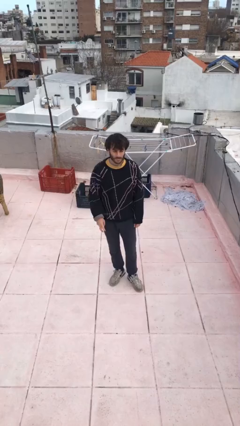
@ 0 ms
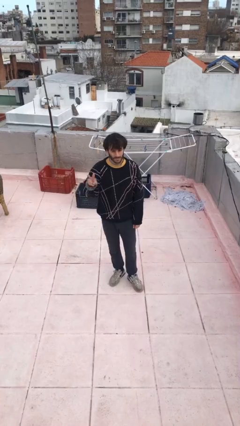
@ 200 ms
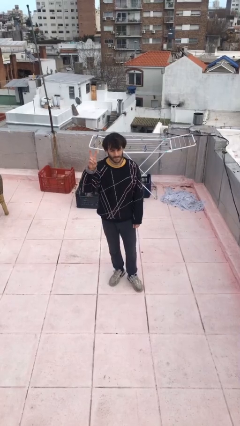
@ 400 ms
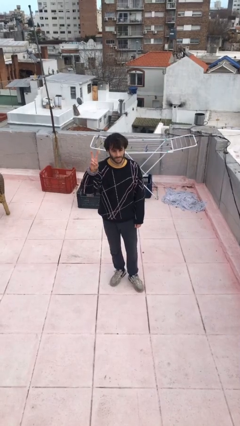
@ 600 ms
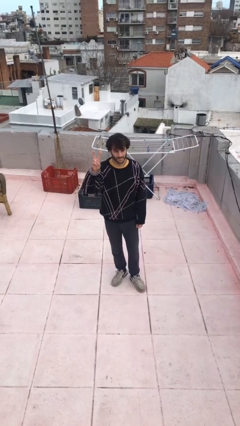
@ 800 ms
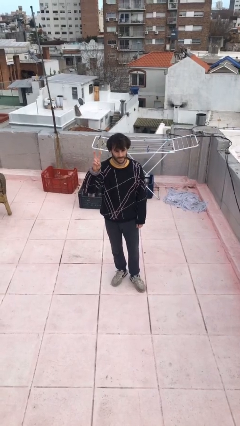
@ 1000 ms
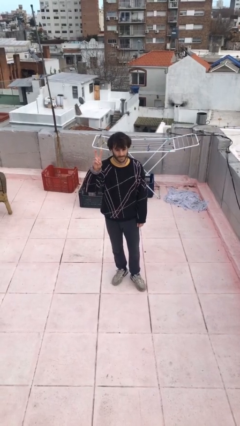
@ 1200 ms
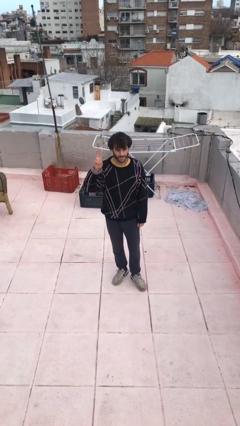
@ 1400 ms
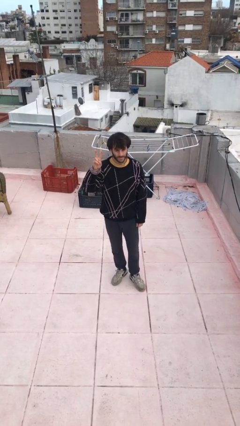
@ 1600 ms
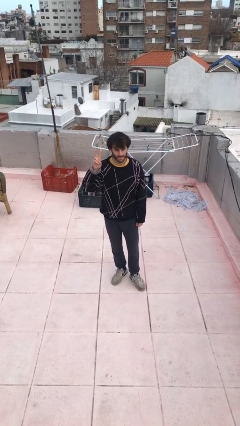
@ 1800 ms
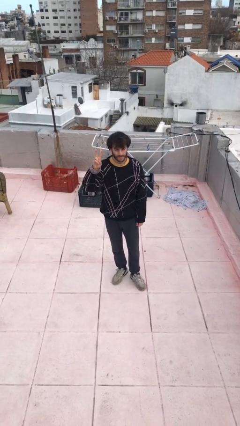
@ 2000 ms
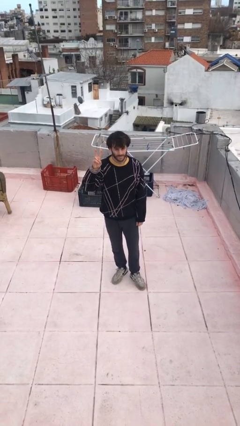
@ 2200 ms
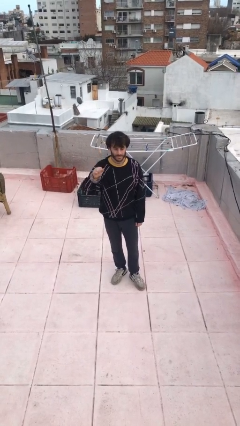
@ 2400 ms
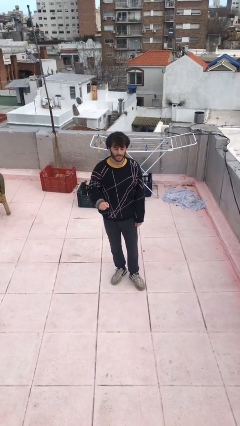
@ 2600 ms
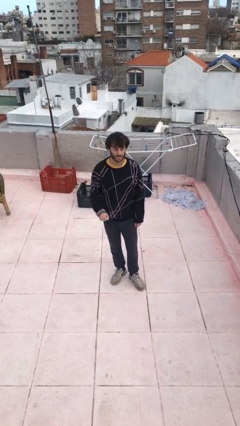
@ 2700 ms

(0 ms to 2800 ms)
person gestures peace

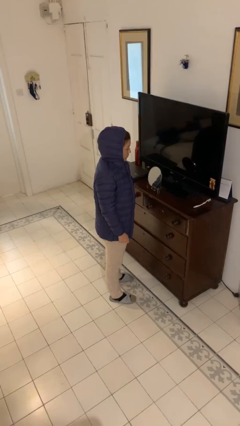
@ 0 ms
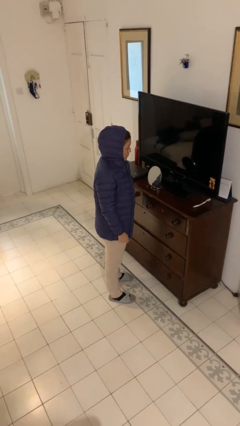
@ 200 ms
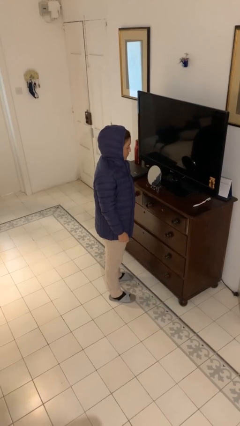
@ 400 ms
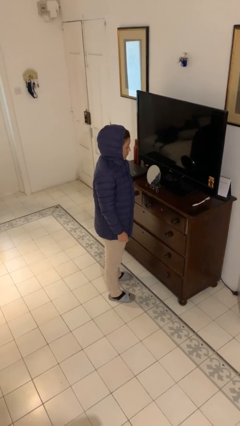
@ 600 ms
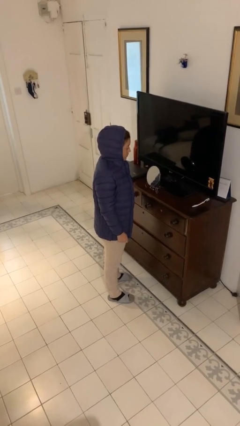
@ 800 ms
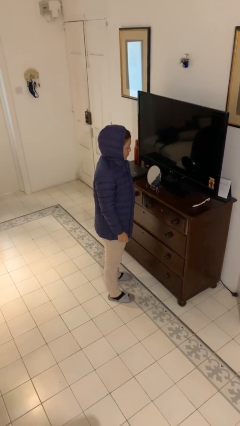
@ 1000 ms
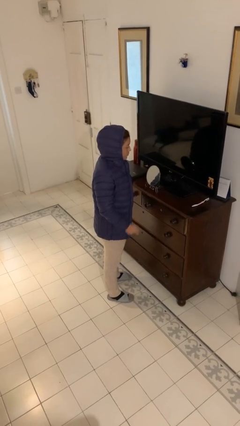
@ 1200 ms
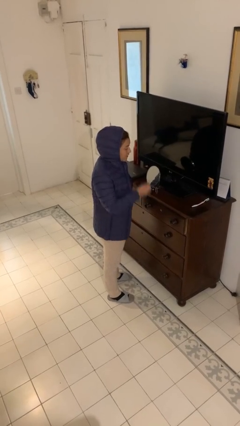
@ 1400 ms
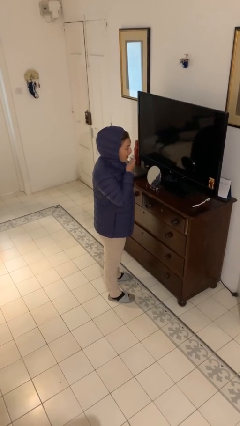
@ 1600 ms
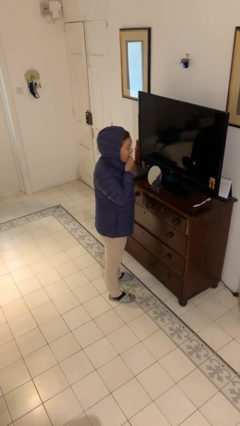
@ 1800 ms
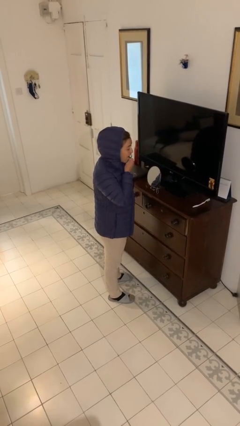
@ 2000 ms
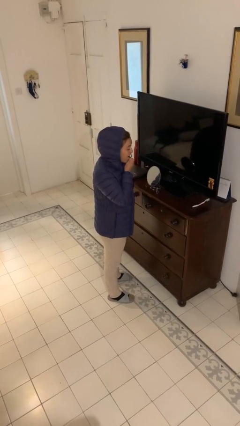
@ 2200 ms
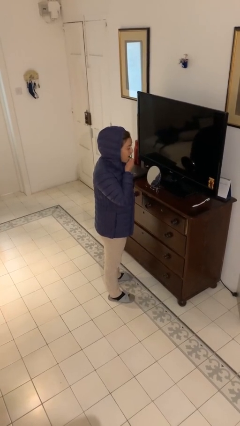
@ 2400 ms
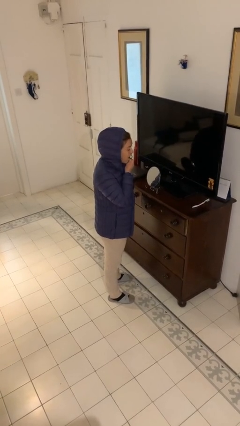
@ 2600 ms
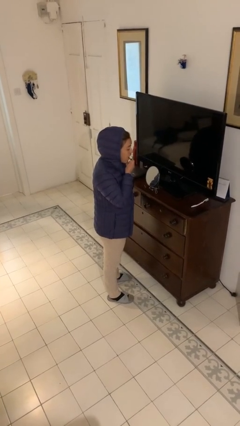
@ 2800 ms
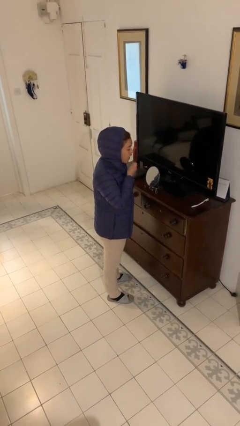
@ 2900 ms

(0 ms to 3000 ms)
person flosses

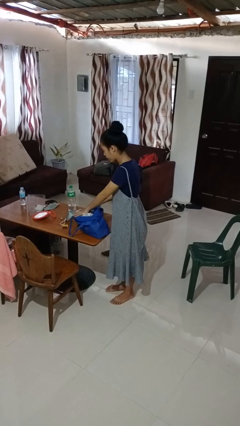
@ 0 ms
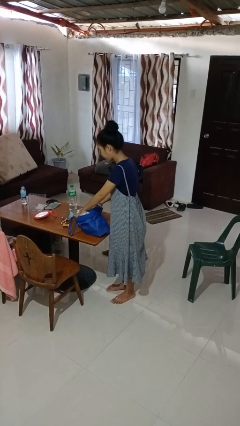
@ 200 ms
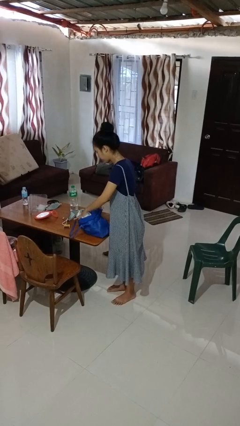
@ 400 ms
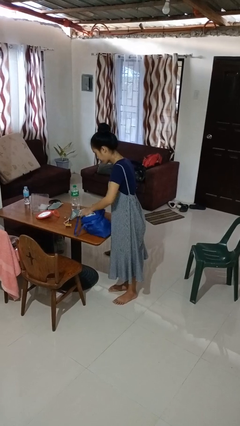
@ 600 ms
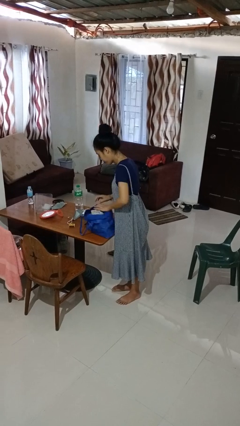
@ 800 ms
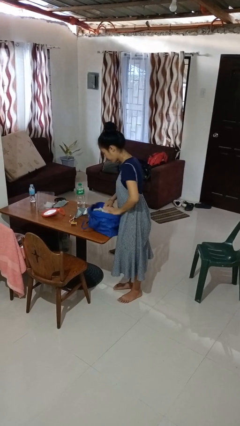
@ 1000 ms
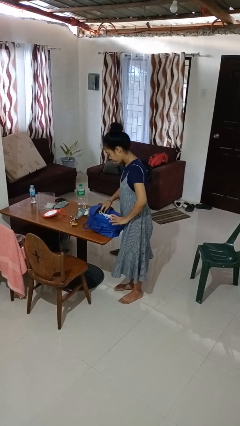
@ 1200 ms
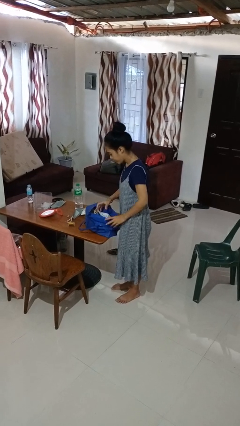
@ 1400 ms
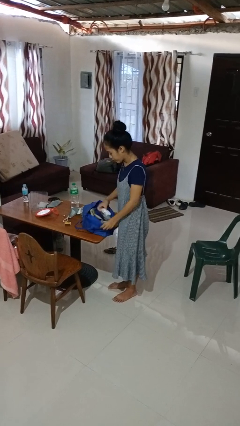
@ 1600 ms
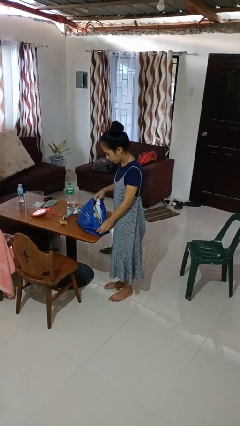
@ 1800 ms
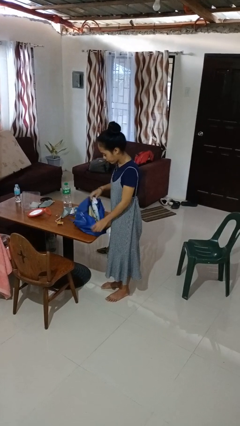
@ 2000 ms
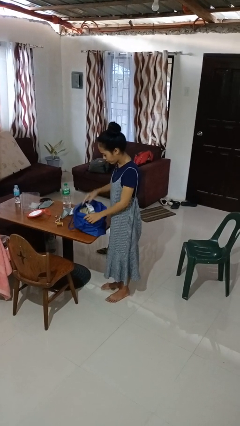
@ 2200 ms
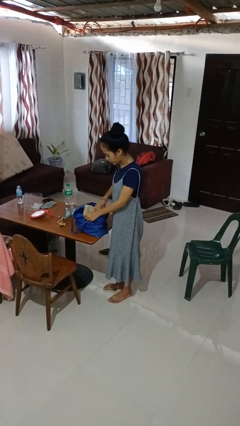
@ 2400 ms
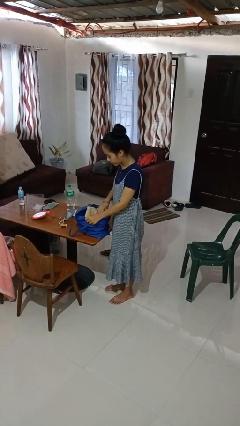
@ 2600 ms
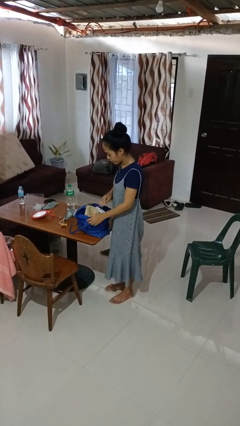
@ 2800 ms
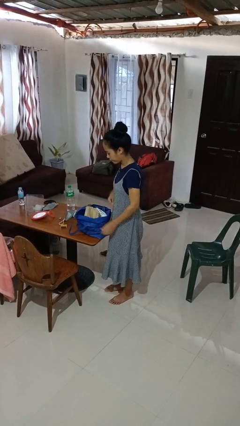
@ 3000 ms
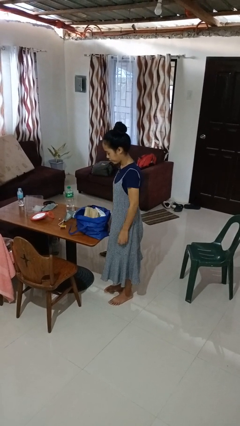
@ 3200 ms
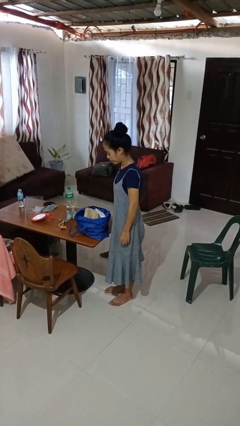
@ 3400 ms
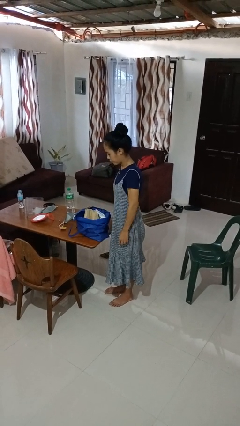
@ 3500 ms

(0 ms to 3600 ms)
person searches in bag

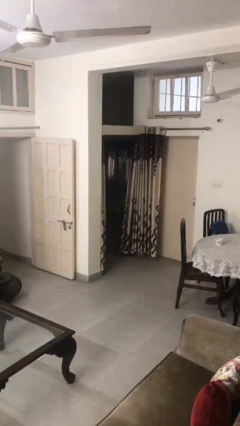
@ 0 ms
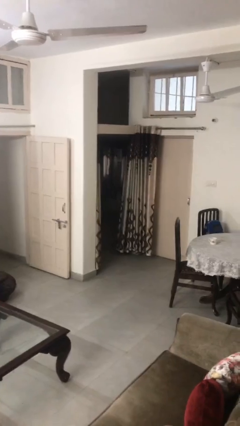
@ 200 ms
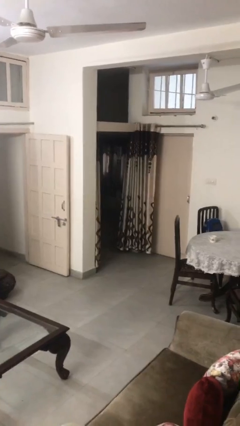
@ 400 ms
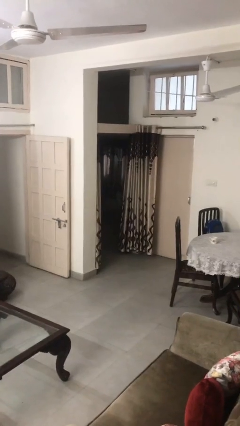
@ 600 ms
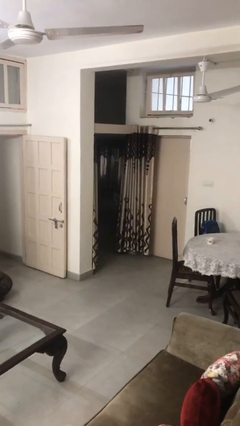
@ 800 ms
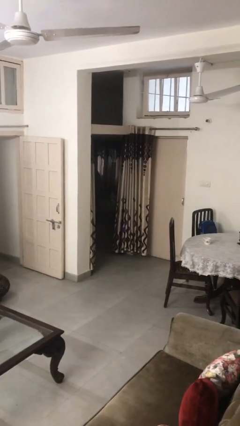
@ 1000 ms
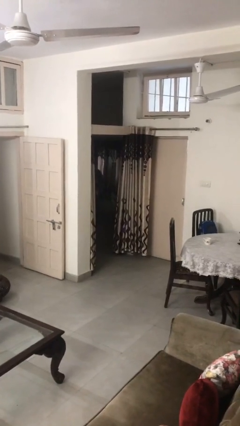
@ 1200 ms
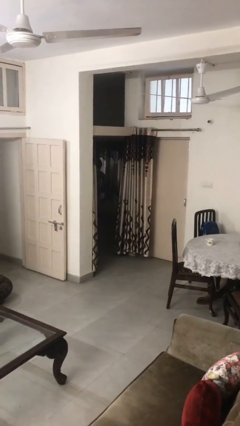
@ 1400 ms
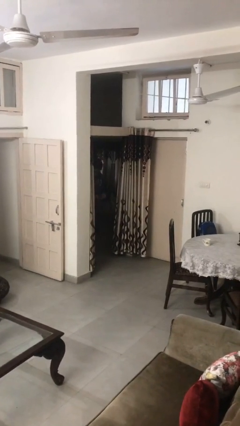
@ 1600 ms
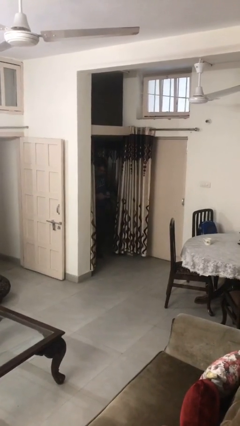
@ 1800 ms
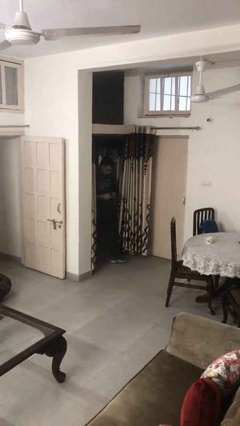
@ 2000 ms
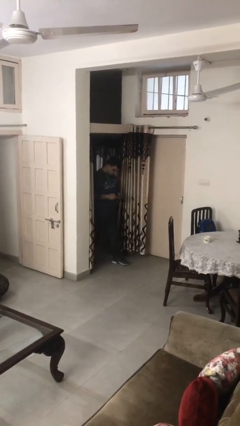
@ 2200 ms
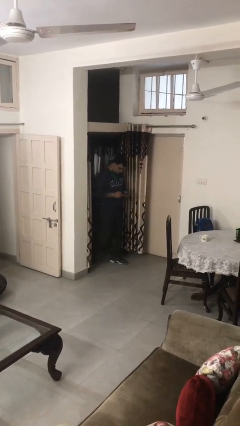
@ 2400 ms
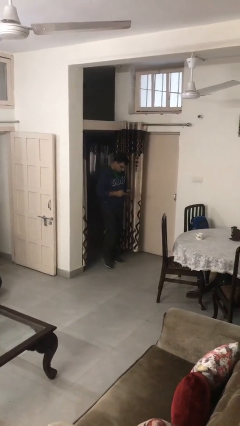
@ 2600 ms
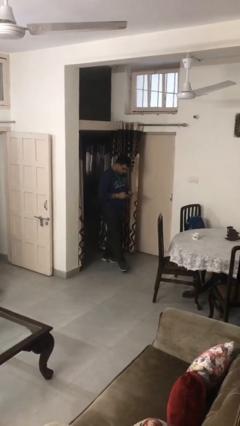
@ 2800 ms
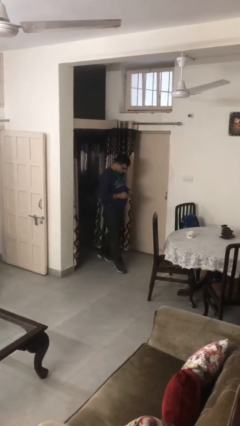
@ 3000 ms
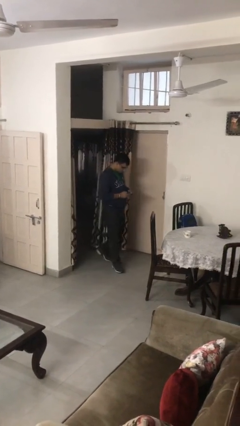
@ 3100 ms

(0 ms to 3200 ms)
person enters scene through structure

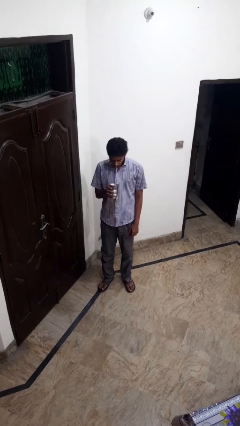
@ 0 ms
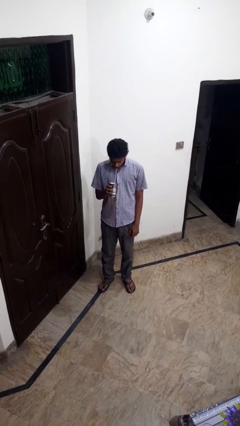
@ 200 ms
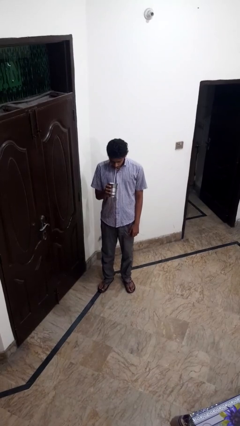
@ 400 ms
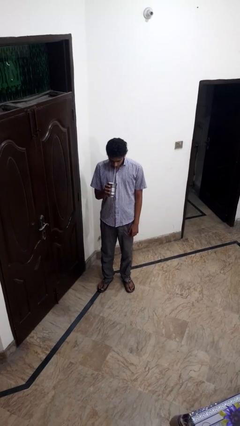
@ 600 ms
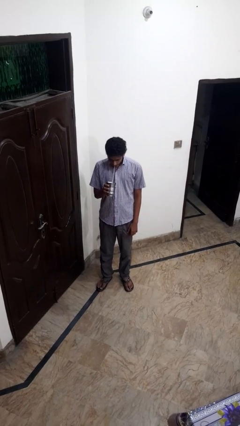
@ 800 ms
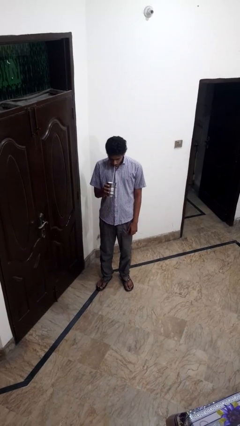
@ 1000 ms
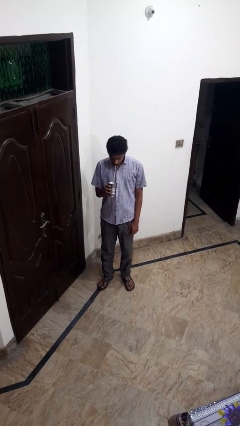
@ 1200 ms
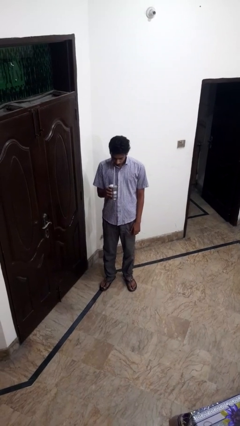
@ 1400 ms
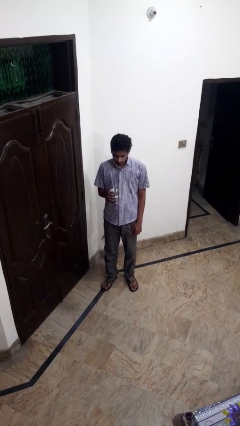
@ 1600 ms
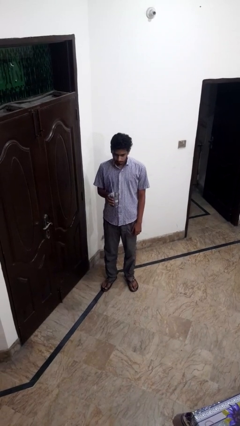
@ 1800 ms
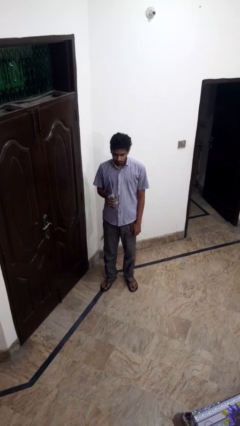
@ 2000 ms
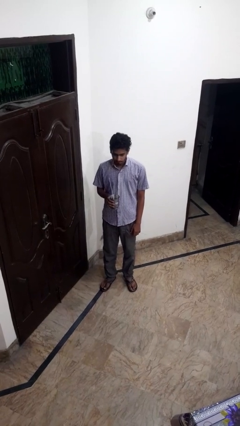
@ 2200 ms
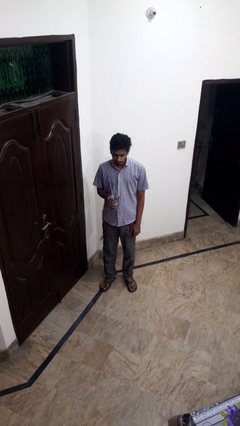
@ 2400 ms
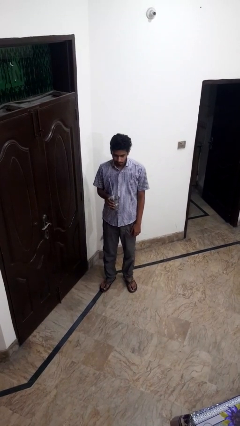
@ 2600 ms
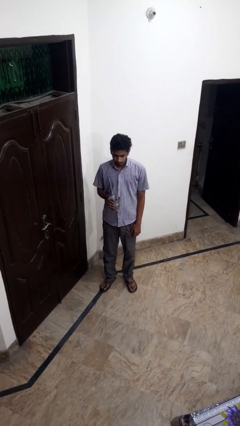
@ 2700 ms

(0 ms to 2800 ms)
person drinks from straw

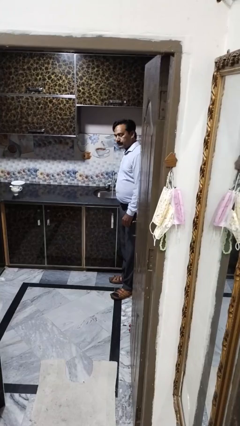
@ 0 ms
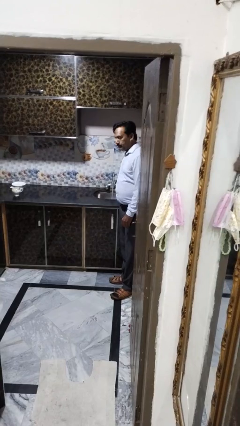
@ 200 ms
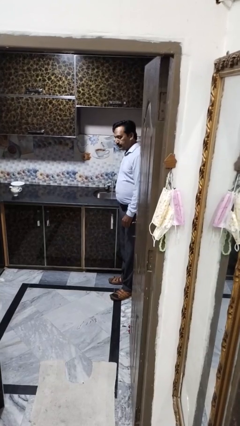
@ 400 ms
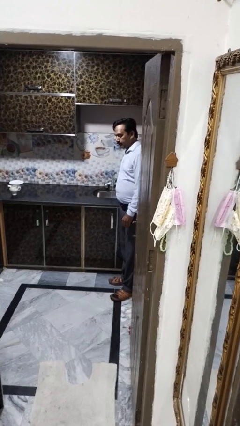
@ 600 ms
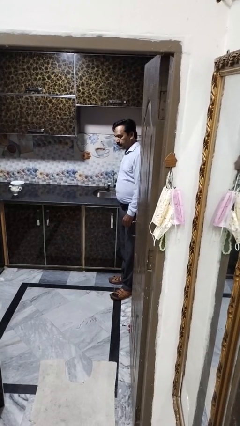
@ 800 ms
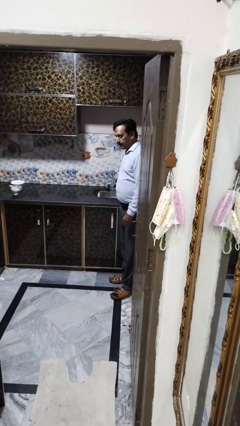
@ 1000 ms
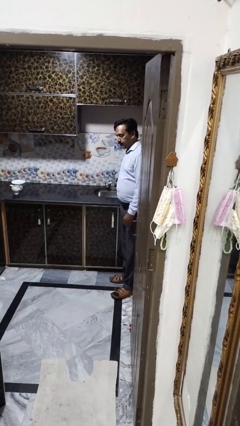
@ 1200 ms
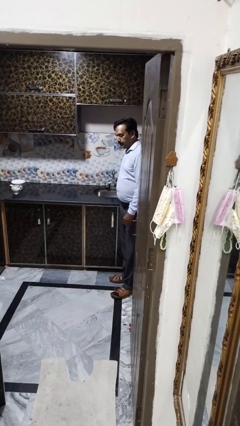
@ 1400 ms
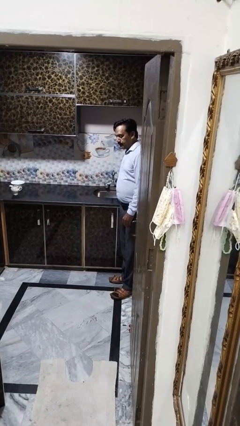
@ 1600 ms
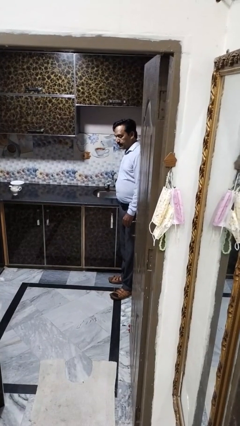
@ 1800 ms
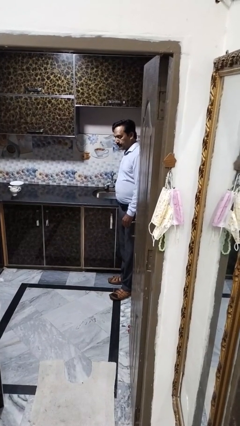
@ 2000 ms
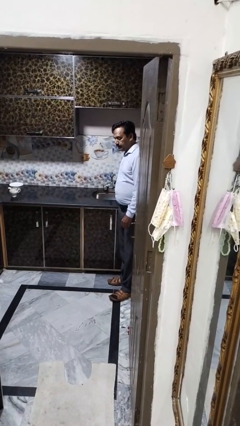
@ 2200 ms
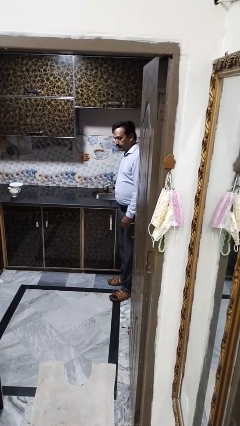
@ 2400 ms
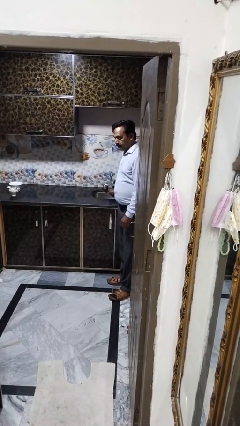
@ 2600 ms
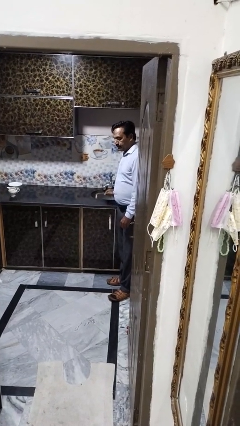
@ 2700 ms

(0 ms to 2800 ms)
person turns off faucet
